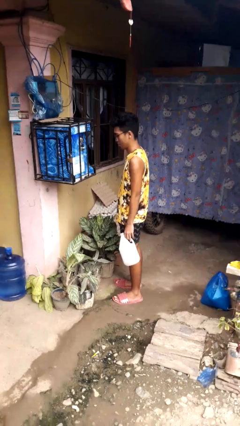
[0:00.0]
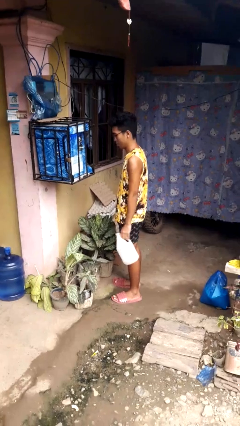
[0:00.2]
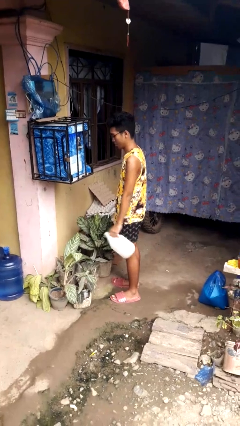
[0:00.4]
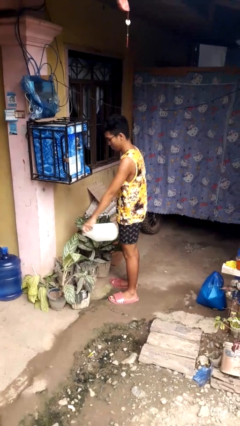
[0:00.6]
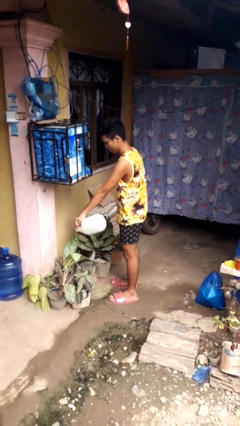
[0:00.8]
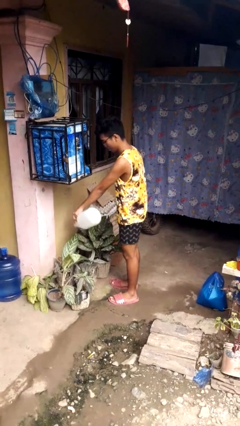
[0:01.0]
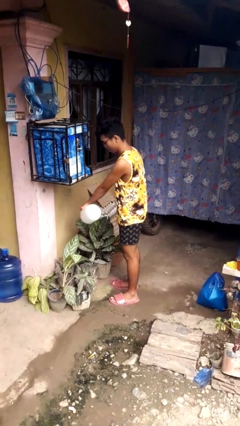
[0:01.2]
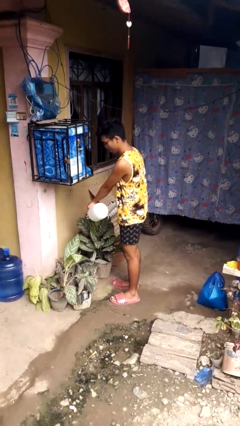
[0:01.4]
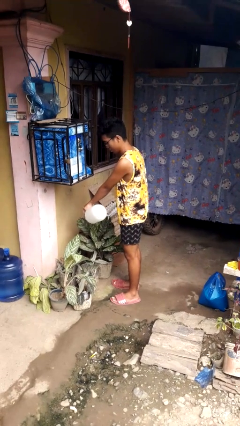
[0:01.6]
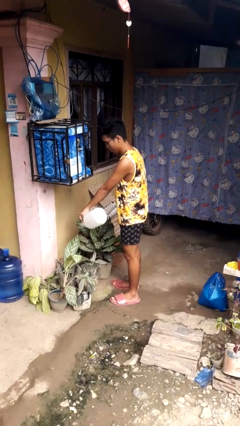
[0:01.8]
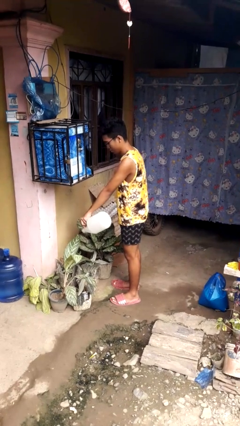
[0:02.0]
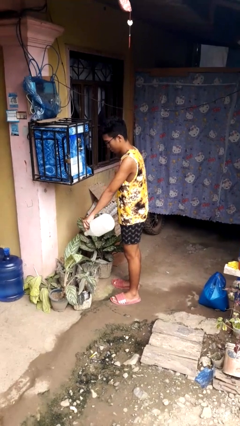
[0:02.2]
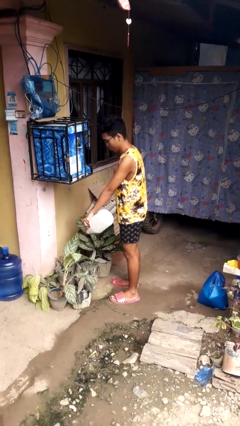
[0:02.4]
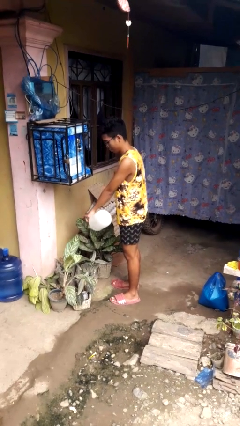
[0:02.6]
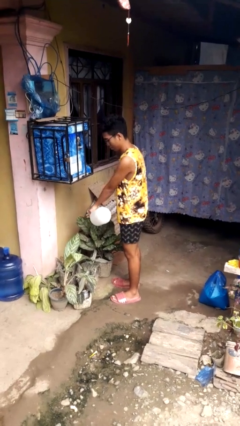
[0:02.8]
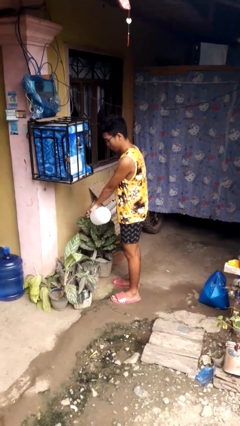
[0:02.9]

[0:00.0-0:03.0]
person waters houseplant

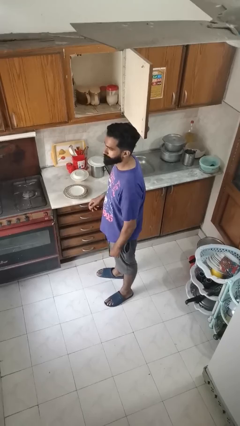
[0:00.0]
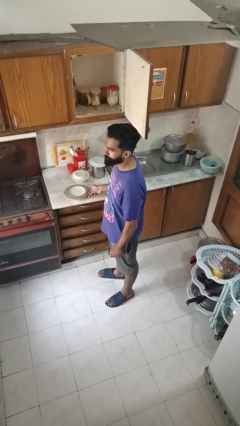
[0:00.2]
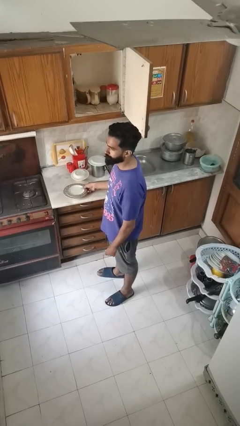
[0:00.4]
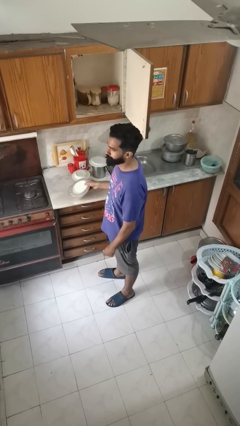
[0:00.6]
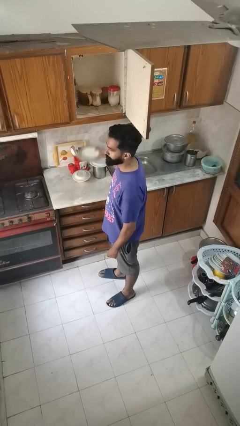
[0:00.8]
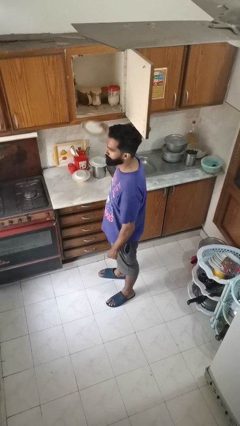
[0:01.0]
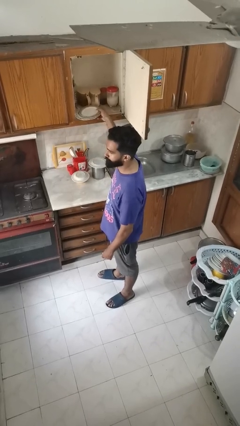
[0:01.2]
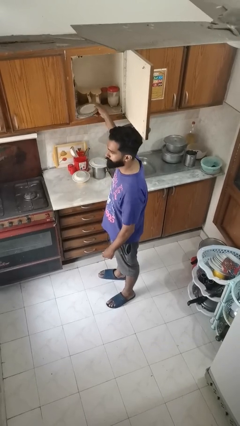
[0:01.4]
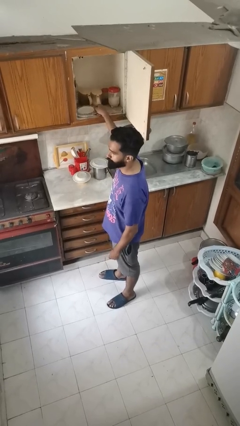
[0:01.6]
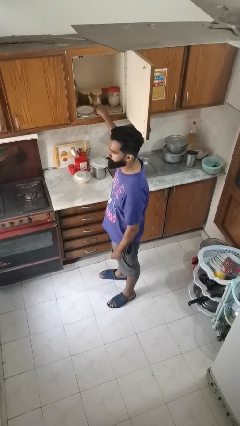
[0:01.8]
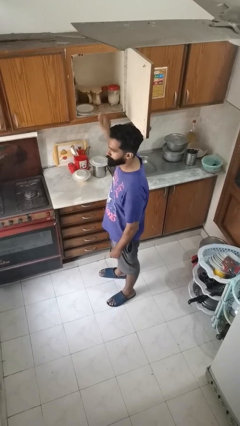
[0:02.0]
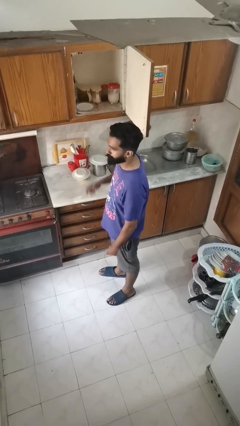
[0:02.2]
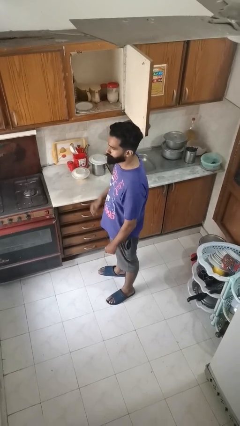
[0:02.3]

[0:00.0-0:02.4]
person puts object in cabinet

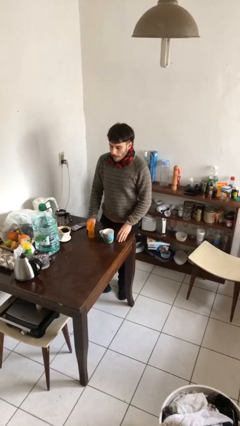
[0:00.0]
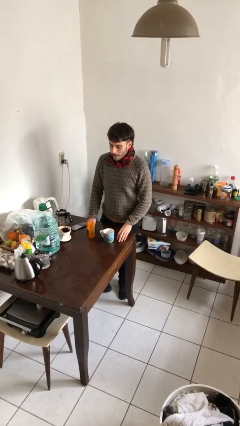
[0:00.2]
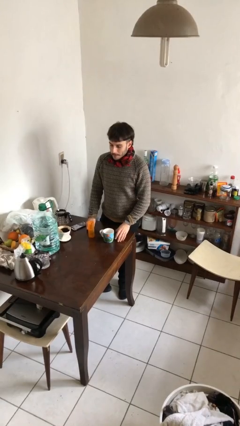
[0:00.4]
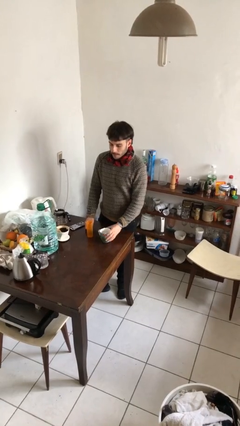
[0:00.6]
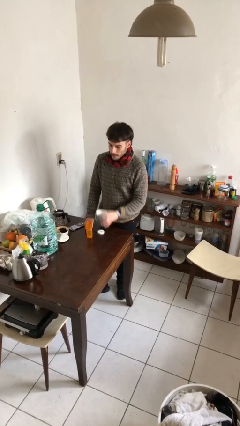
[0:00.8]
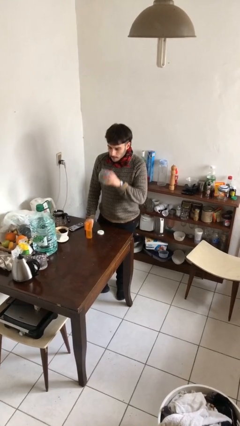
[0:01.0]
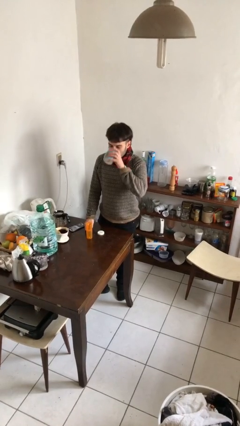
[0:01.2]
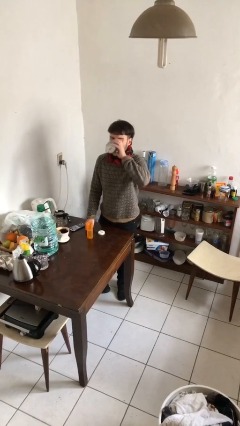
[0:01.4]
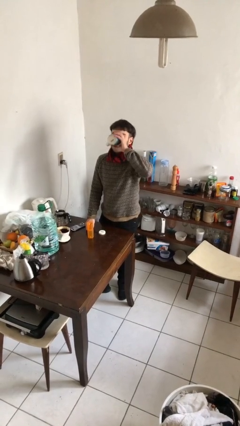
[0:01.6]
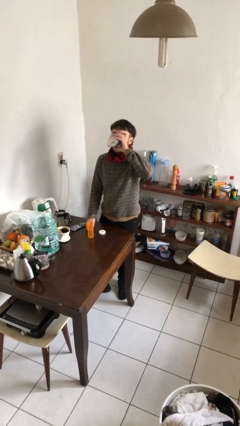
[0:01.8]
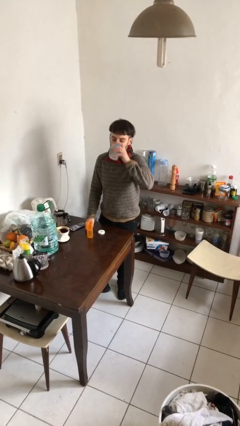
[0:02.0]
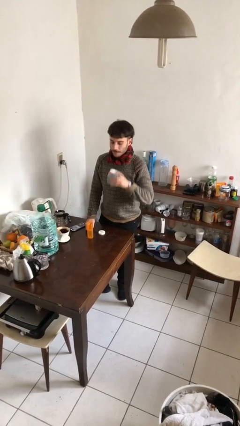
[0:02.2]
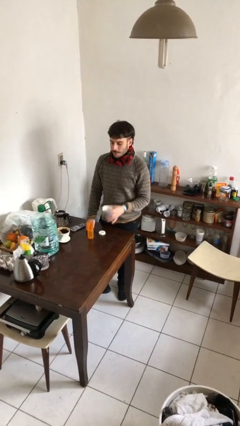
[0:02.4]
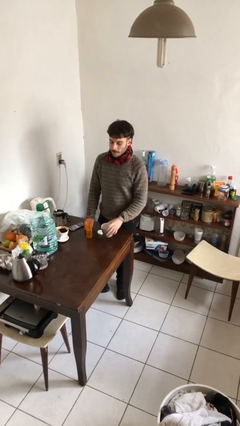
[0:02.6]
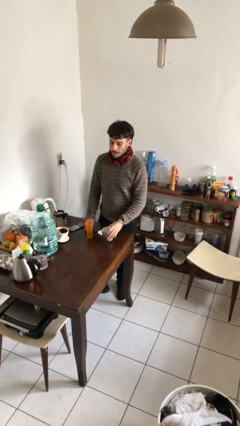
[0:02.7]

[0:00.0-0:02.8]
person drinks from cup

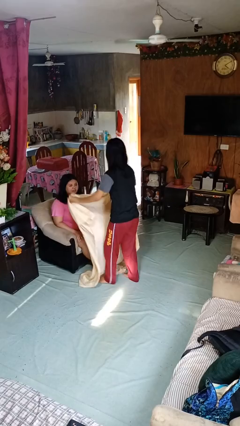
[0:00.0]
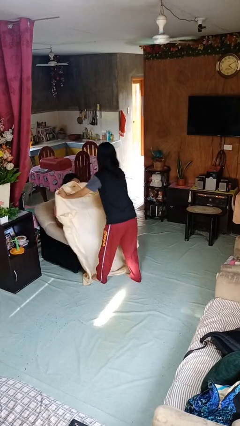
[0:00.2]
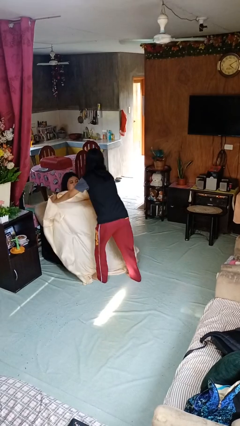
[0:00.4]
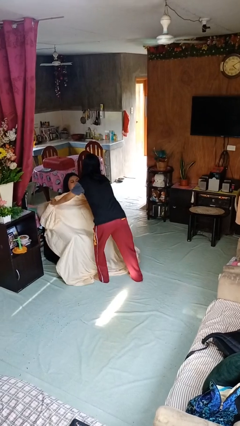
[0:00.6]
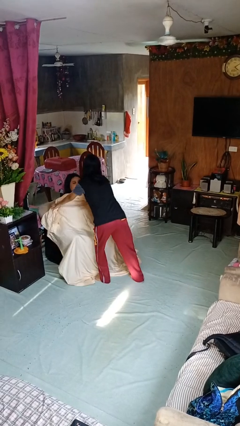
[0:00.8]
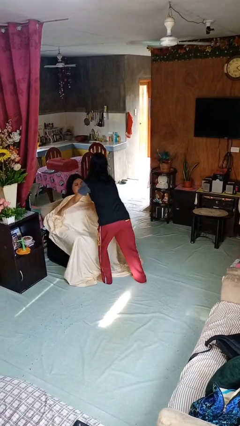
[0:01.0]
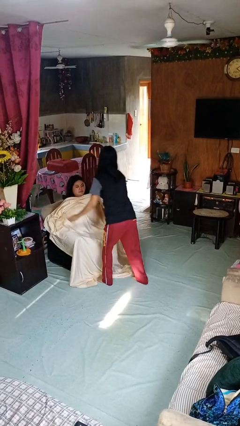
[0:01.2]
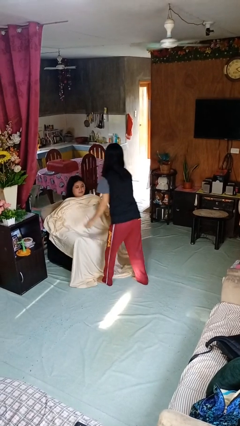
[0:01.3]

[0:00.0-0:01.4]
person covers friend with blanket

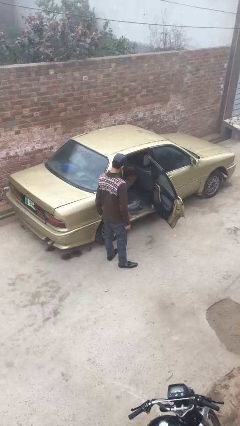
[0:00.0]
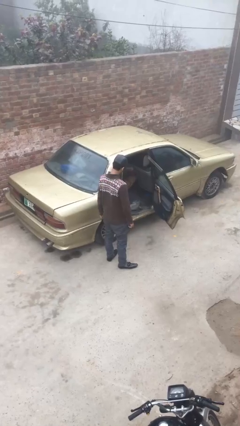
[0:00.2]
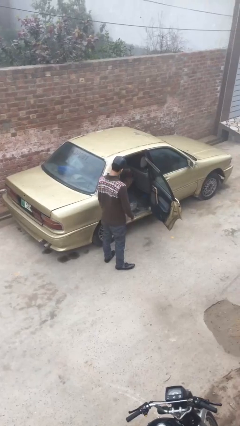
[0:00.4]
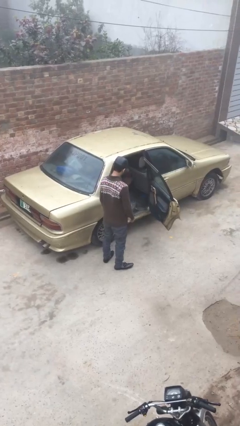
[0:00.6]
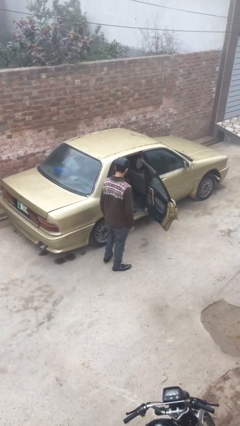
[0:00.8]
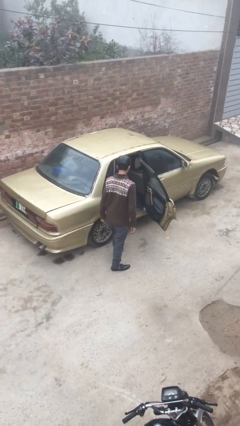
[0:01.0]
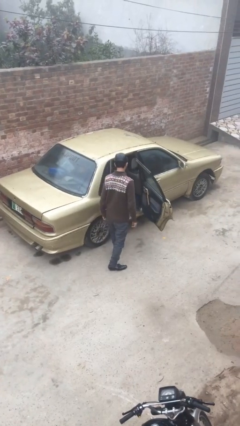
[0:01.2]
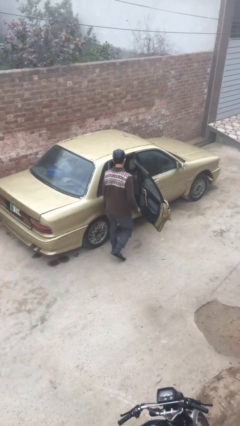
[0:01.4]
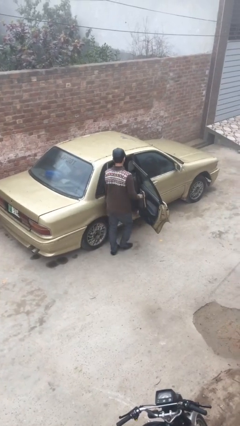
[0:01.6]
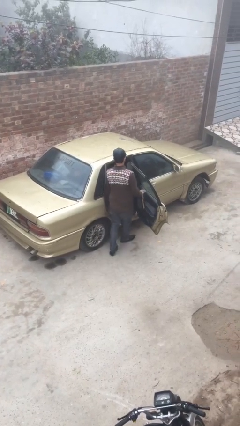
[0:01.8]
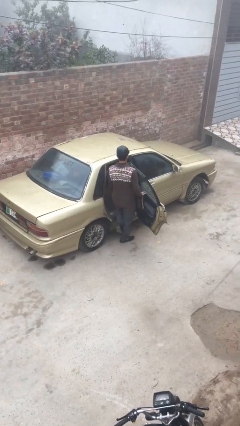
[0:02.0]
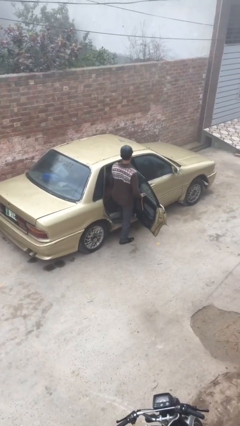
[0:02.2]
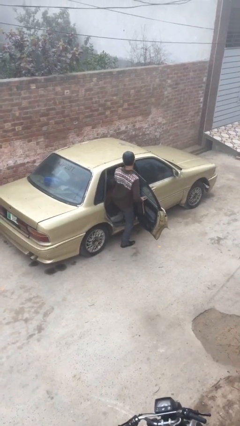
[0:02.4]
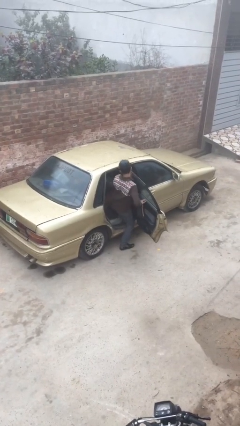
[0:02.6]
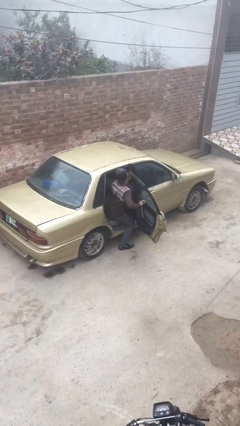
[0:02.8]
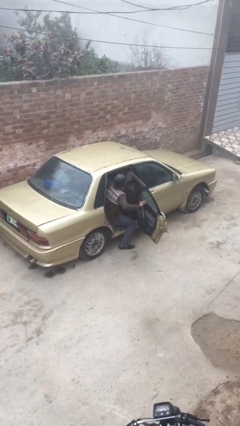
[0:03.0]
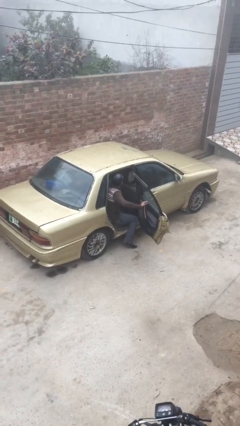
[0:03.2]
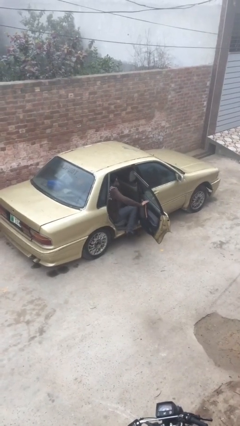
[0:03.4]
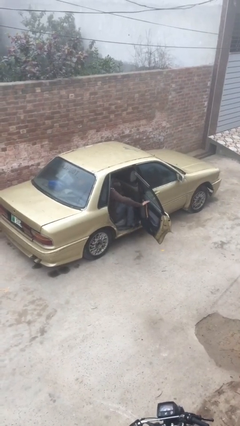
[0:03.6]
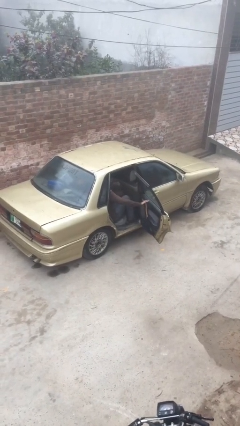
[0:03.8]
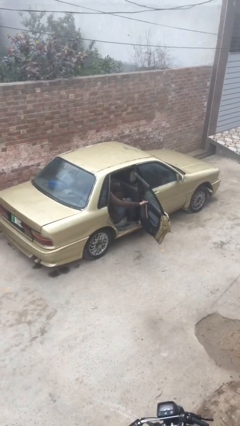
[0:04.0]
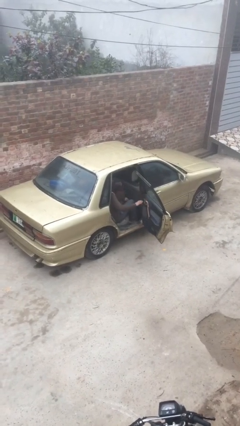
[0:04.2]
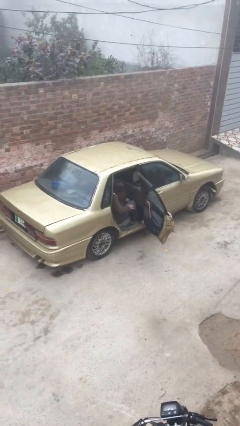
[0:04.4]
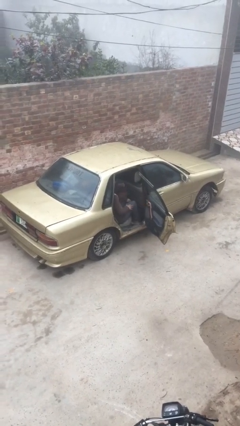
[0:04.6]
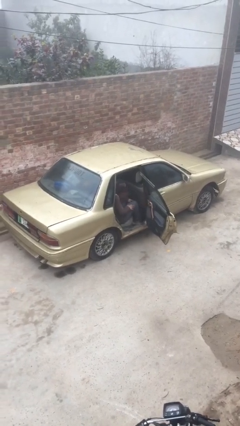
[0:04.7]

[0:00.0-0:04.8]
person enters car

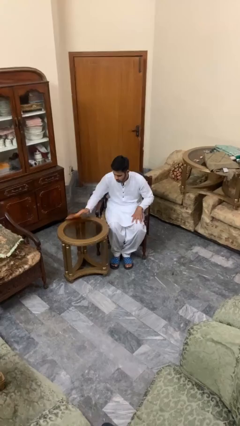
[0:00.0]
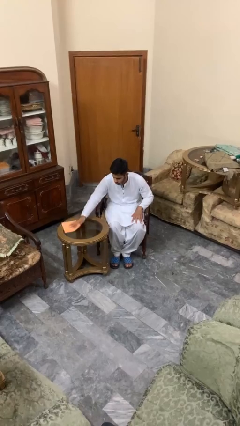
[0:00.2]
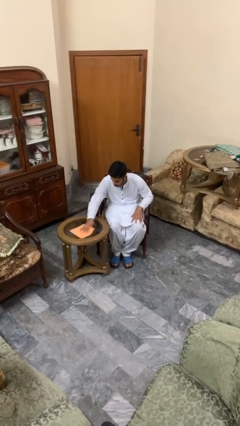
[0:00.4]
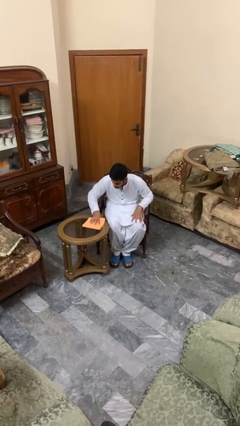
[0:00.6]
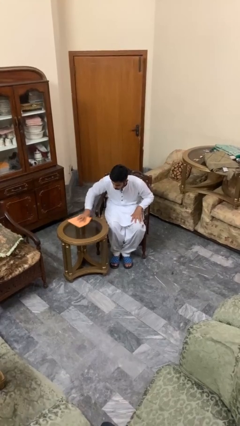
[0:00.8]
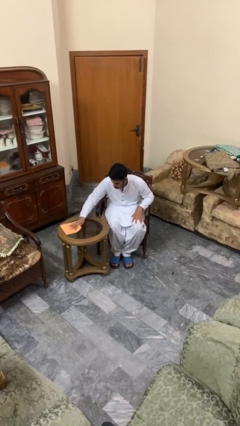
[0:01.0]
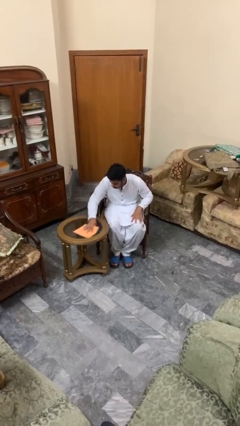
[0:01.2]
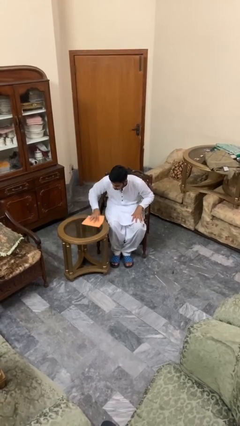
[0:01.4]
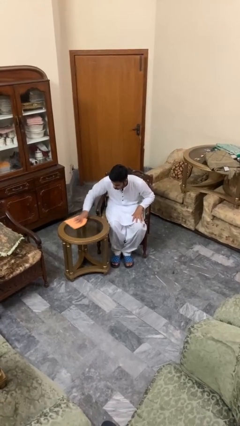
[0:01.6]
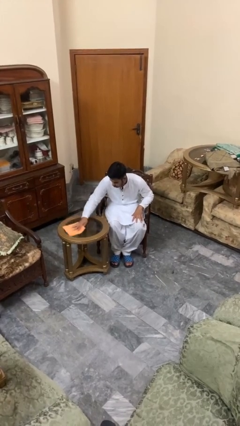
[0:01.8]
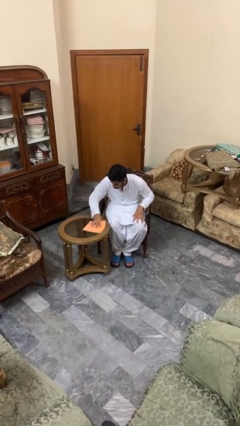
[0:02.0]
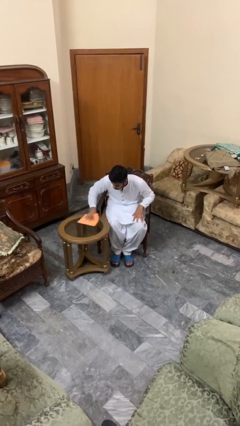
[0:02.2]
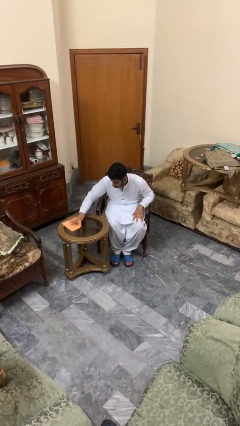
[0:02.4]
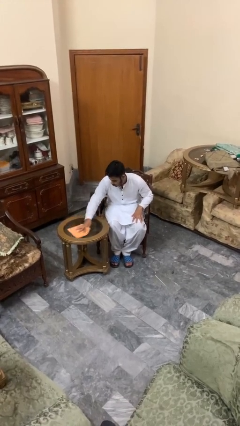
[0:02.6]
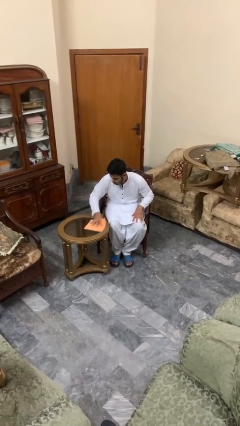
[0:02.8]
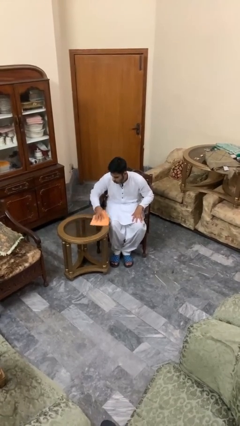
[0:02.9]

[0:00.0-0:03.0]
person cleans table with rag
